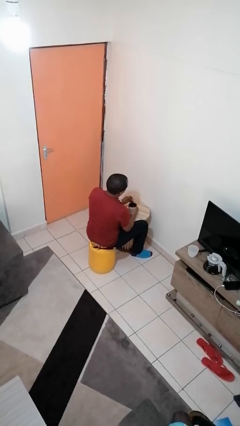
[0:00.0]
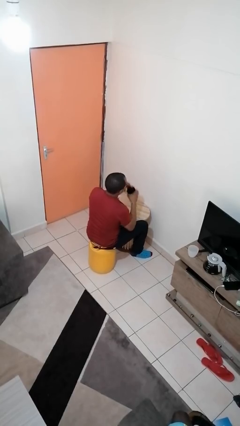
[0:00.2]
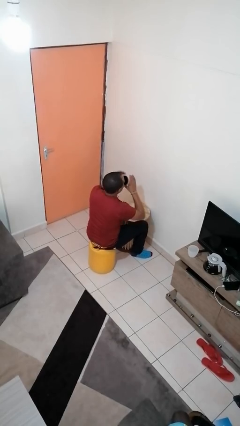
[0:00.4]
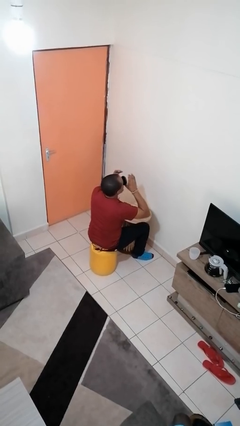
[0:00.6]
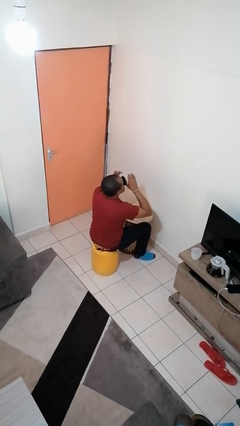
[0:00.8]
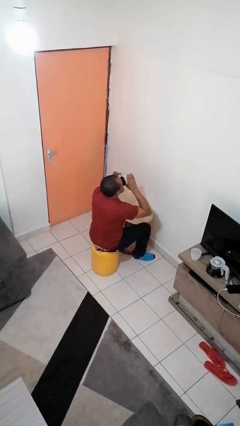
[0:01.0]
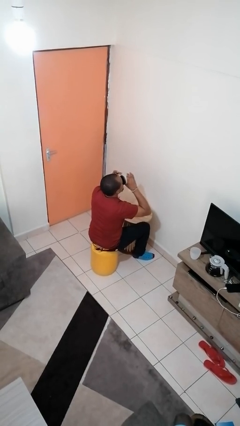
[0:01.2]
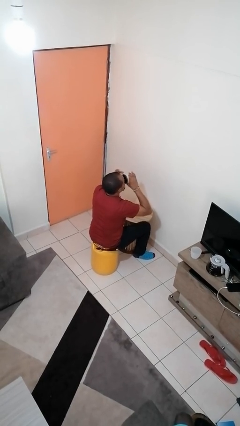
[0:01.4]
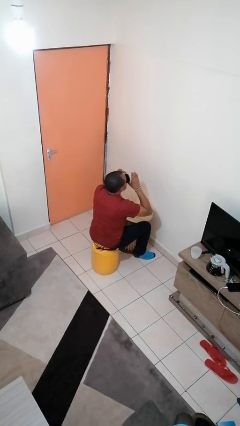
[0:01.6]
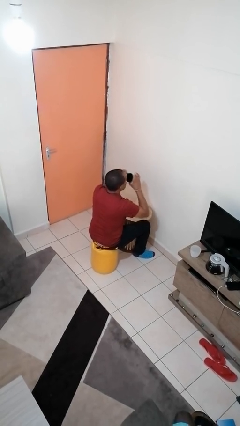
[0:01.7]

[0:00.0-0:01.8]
person drinks from mug

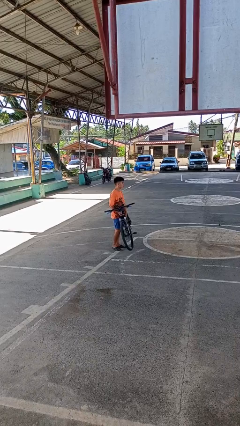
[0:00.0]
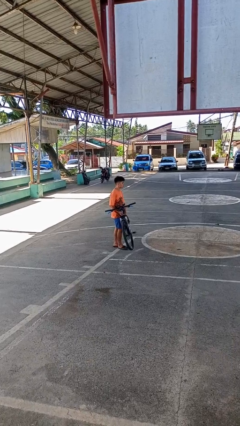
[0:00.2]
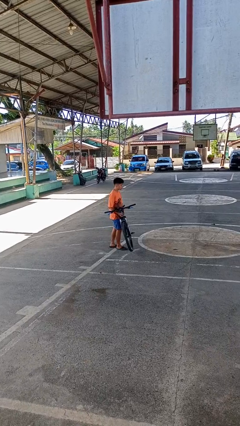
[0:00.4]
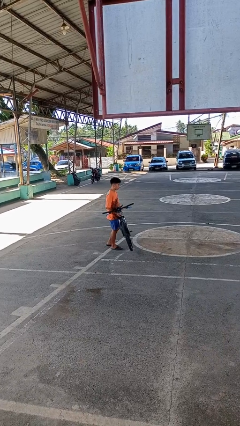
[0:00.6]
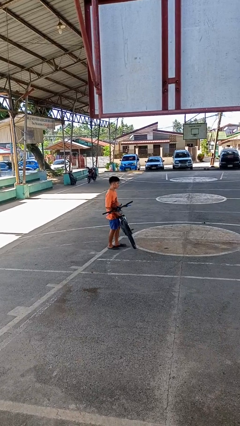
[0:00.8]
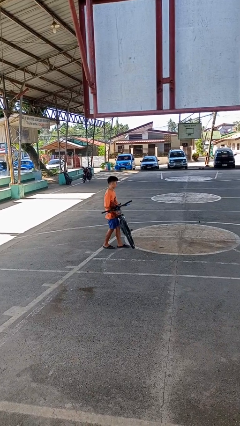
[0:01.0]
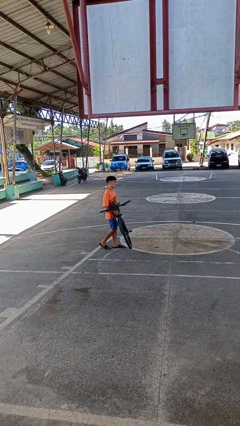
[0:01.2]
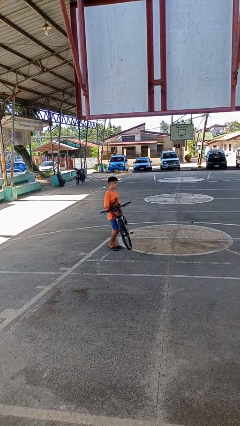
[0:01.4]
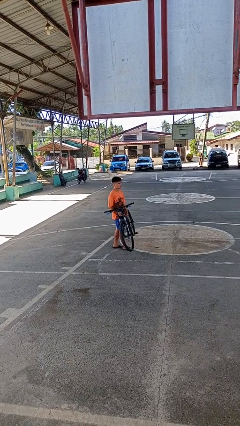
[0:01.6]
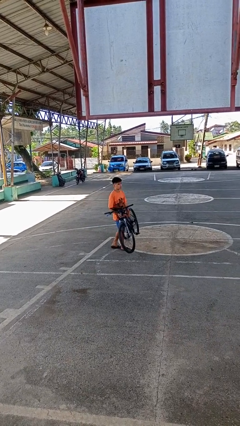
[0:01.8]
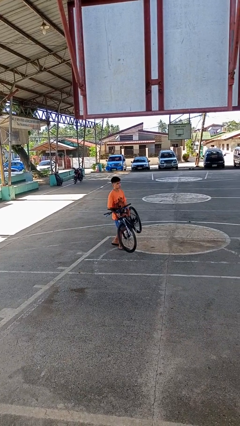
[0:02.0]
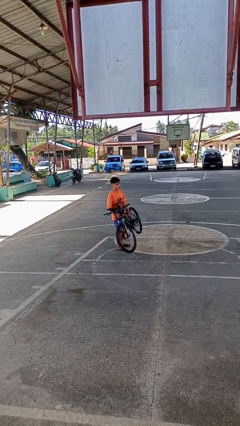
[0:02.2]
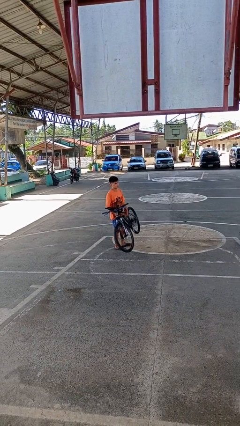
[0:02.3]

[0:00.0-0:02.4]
person carries bicycle

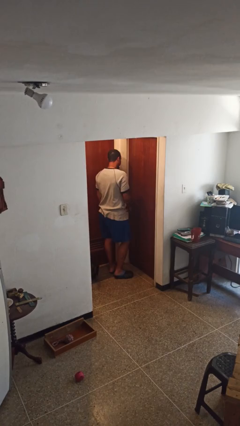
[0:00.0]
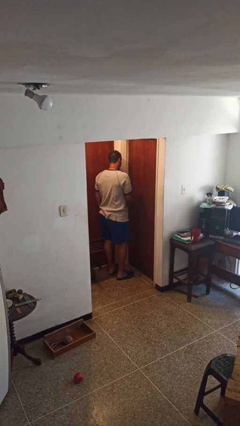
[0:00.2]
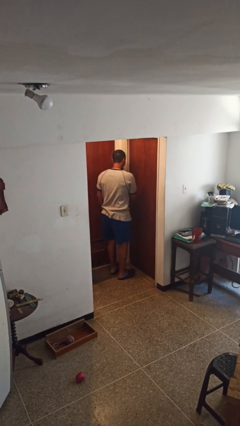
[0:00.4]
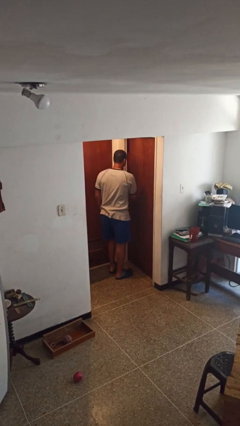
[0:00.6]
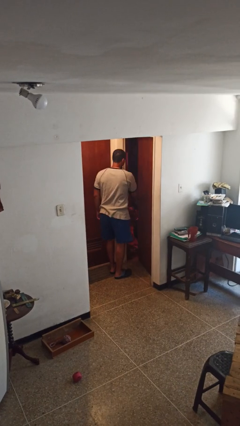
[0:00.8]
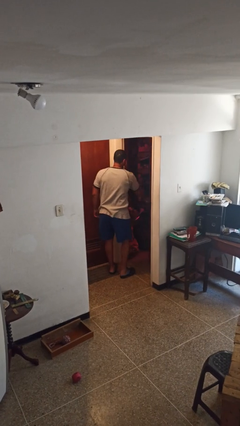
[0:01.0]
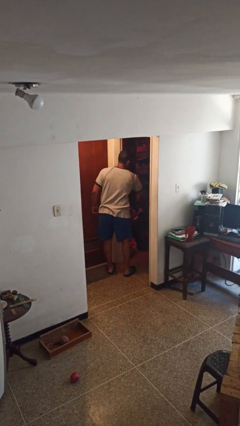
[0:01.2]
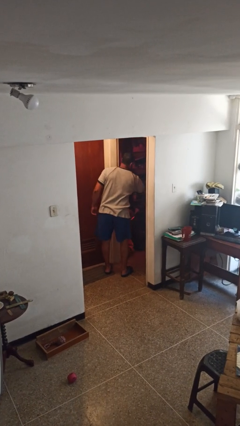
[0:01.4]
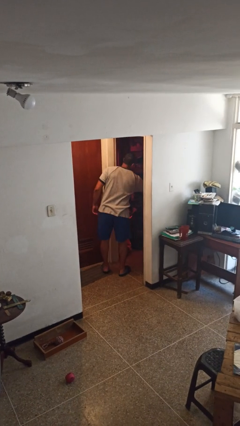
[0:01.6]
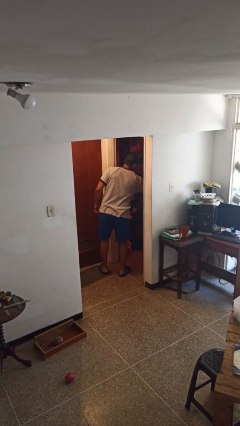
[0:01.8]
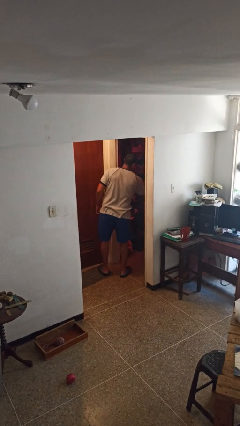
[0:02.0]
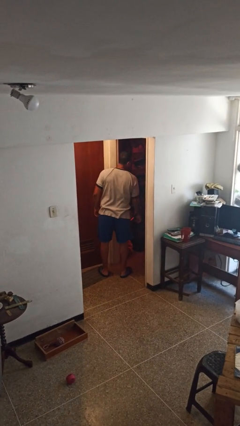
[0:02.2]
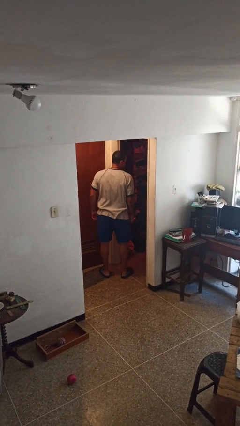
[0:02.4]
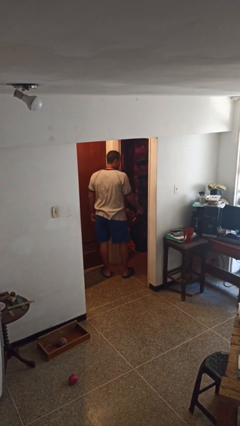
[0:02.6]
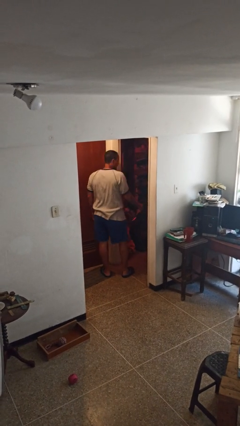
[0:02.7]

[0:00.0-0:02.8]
person opens facility door

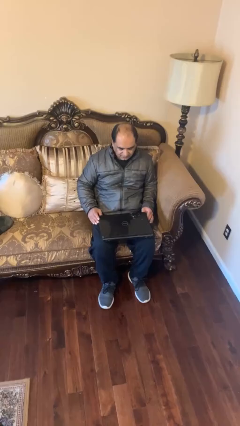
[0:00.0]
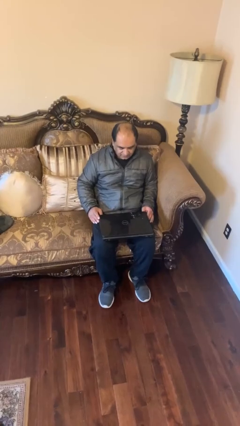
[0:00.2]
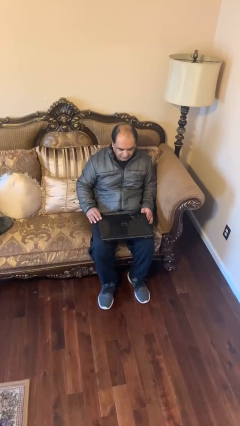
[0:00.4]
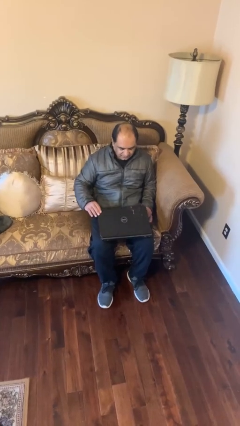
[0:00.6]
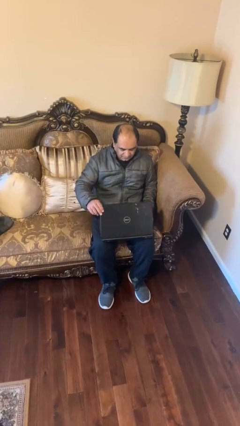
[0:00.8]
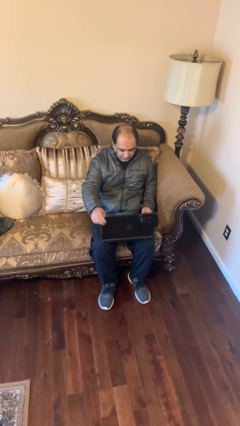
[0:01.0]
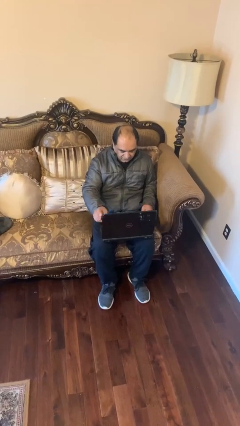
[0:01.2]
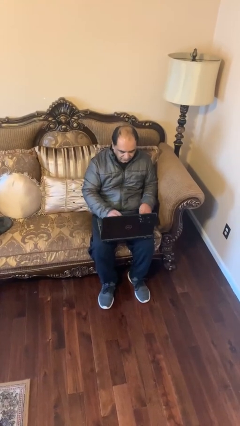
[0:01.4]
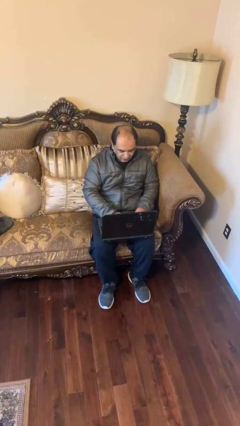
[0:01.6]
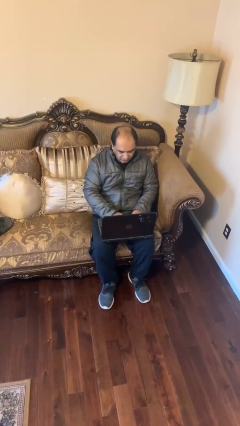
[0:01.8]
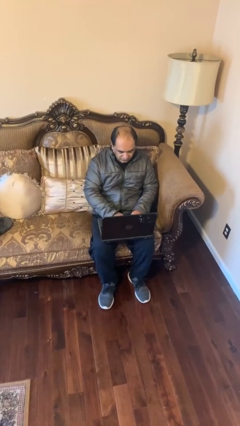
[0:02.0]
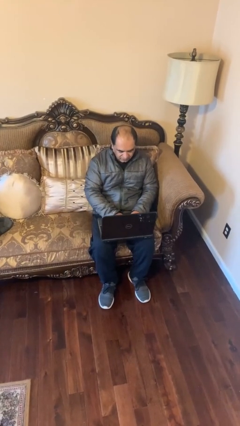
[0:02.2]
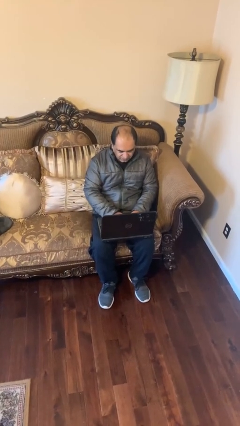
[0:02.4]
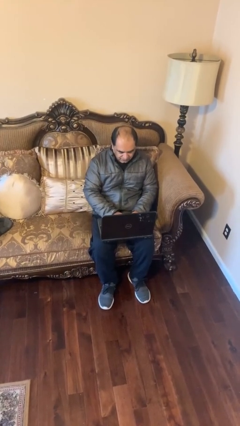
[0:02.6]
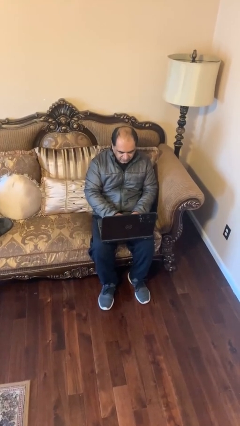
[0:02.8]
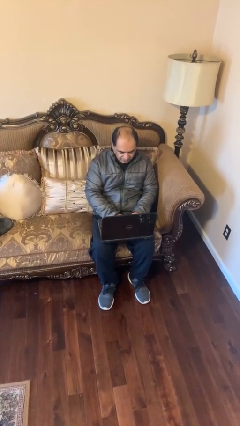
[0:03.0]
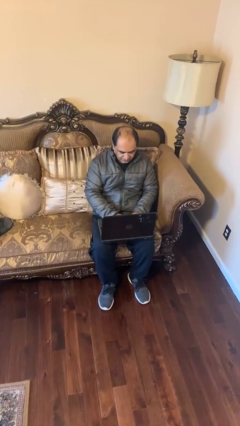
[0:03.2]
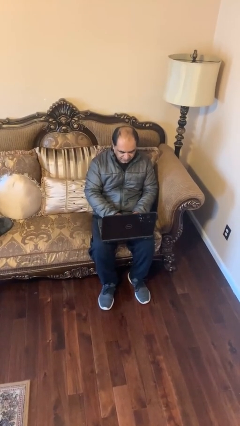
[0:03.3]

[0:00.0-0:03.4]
person interacts with laptop

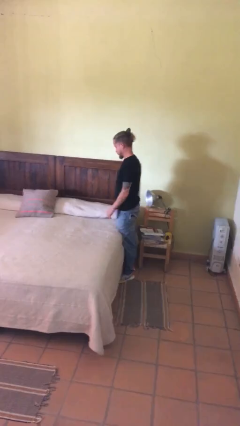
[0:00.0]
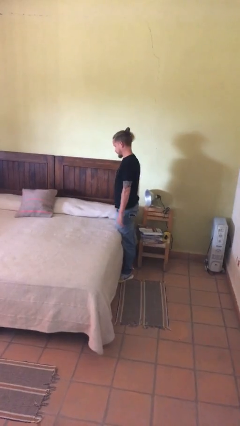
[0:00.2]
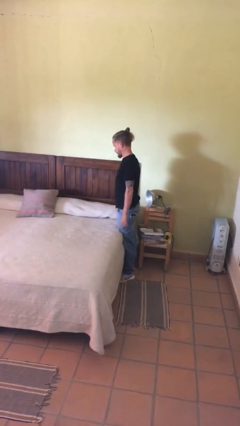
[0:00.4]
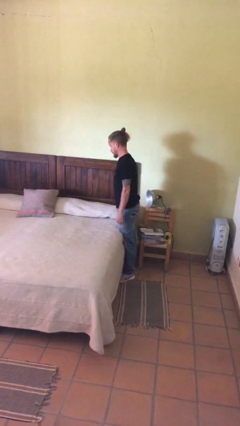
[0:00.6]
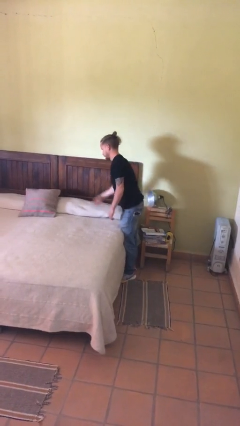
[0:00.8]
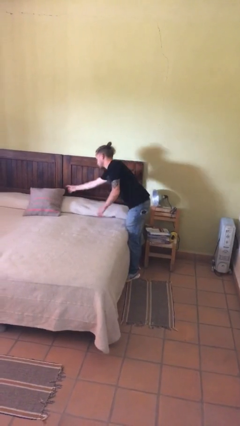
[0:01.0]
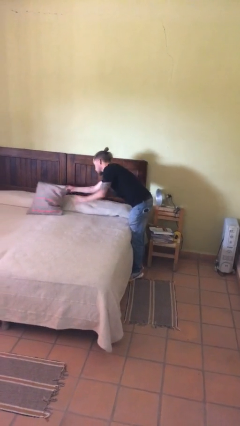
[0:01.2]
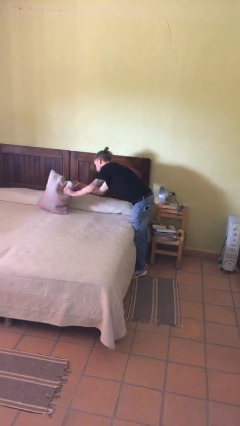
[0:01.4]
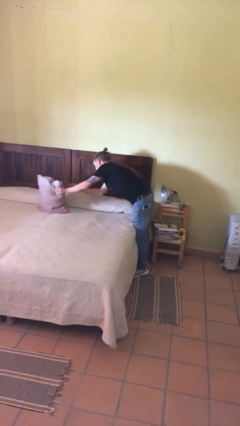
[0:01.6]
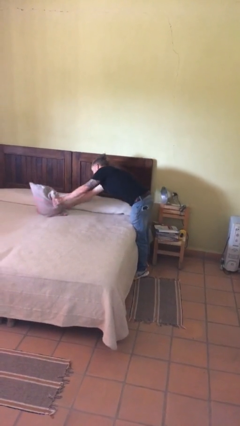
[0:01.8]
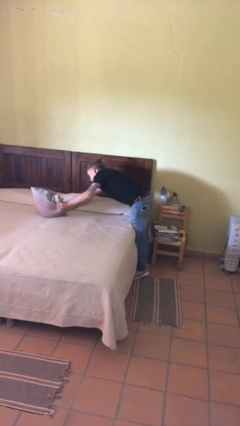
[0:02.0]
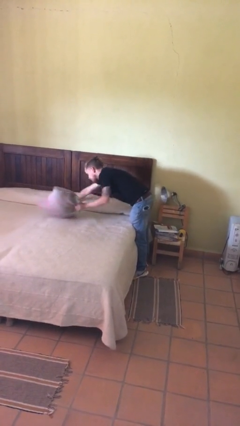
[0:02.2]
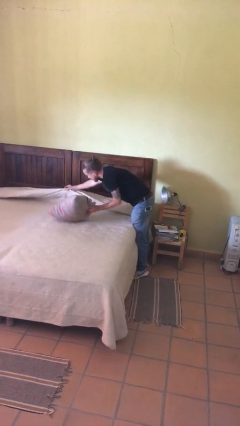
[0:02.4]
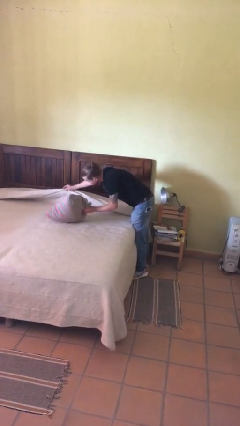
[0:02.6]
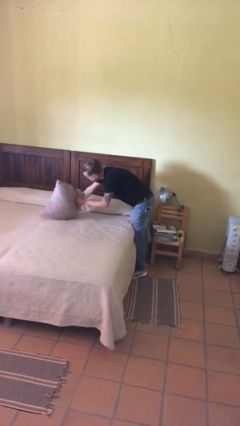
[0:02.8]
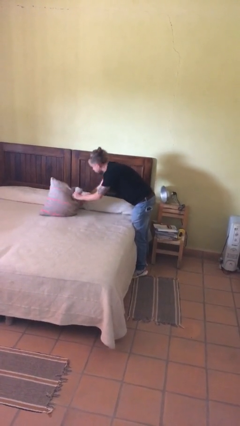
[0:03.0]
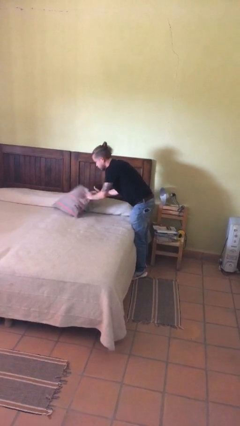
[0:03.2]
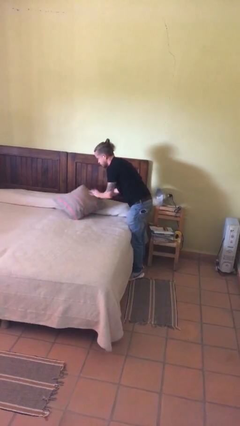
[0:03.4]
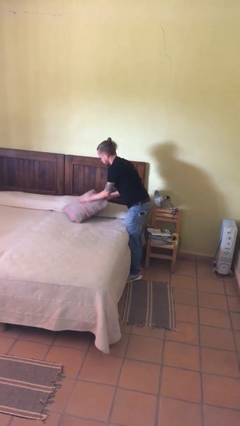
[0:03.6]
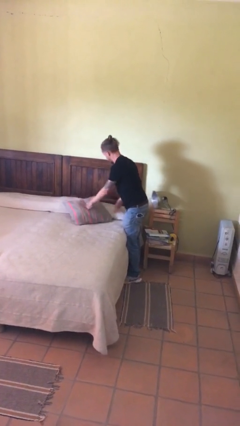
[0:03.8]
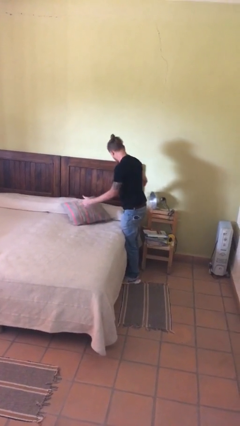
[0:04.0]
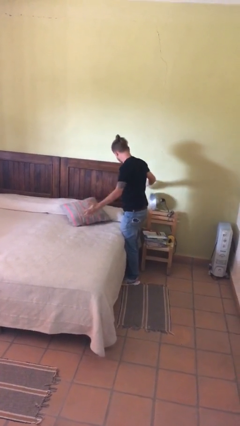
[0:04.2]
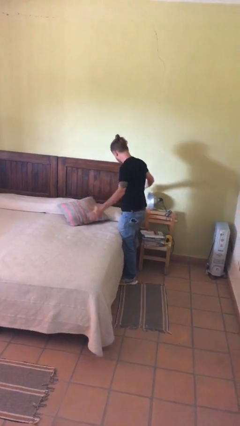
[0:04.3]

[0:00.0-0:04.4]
person searches in couch

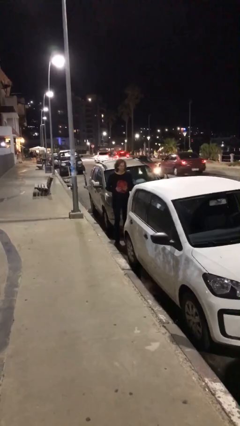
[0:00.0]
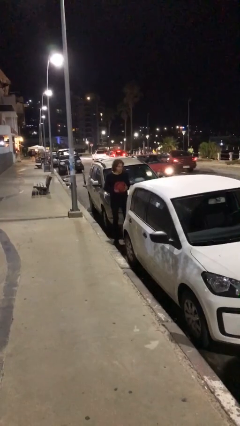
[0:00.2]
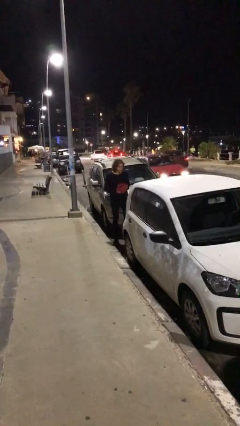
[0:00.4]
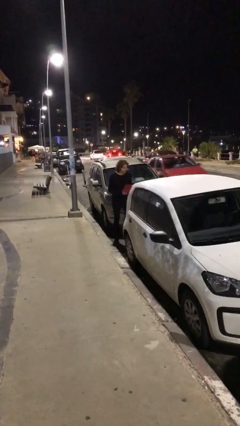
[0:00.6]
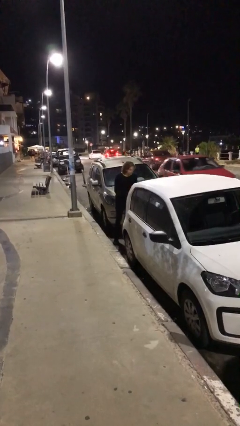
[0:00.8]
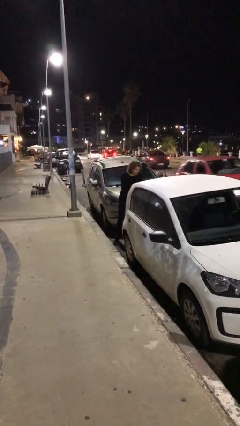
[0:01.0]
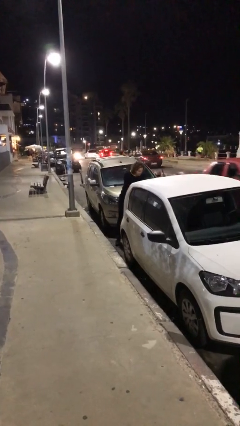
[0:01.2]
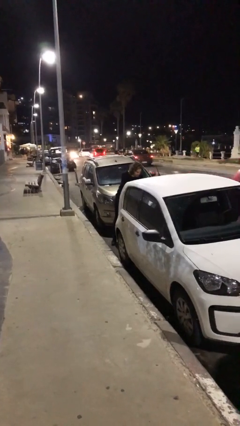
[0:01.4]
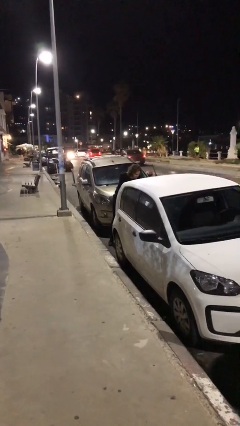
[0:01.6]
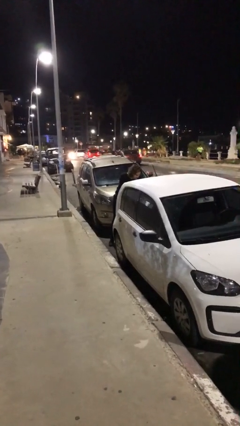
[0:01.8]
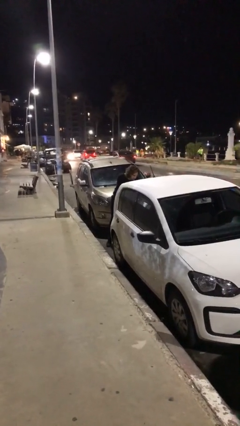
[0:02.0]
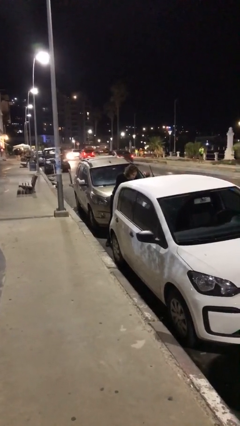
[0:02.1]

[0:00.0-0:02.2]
person loads car

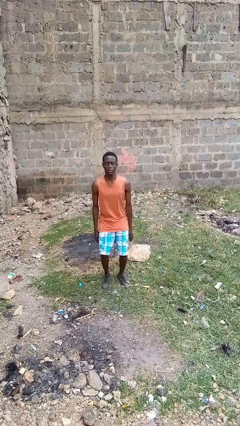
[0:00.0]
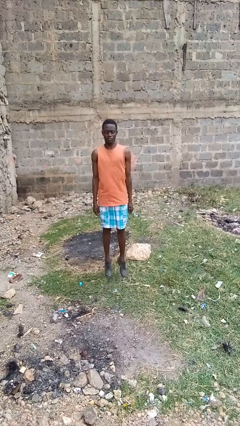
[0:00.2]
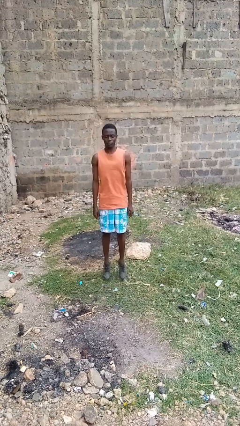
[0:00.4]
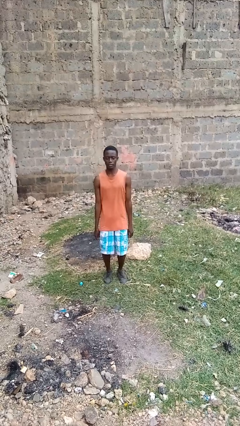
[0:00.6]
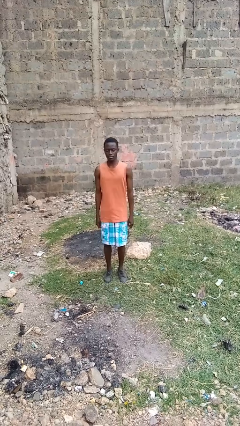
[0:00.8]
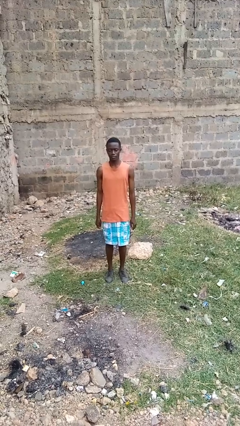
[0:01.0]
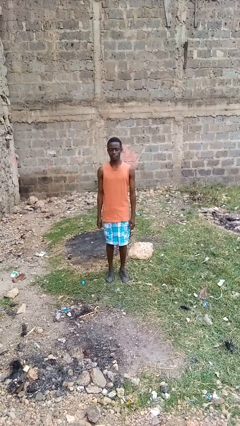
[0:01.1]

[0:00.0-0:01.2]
person jumps
